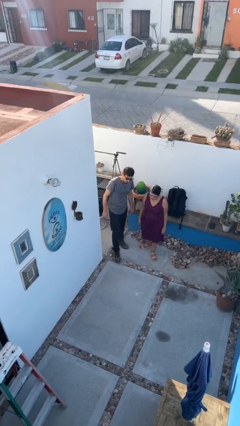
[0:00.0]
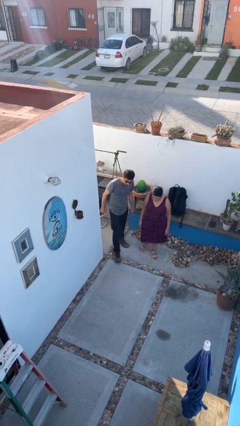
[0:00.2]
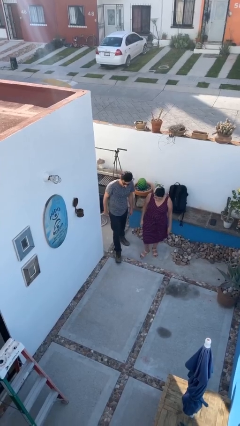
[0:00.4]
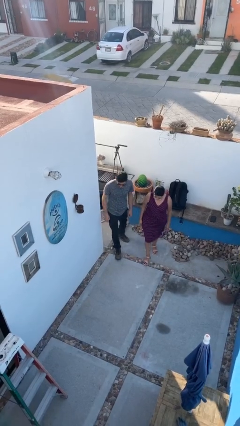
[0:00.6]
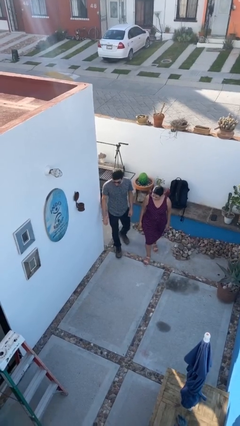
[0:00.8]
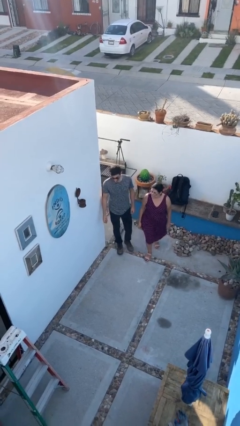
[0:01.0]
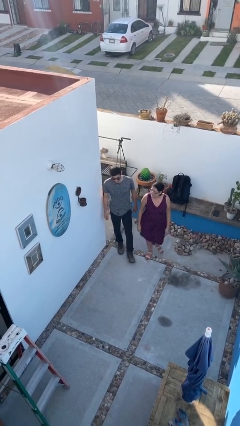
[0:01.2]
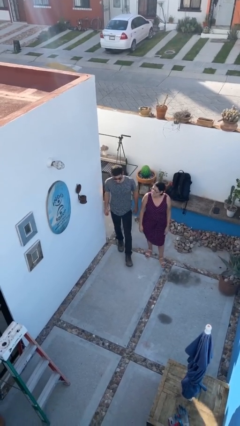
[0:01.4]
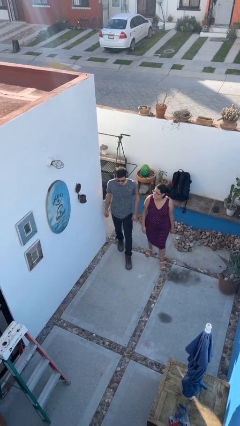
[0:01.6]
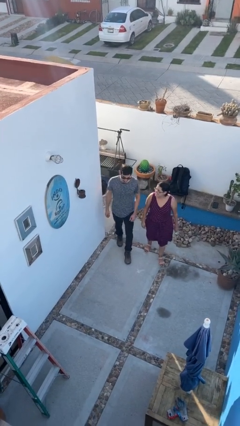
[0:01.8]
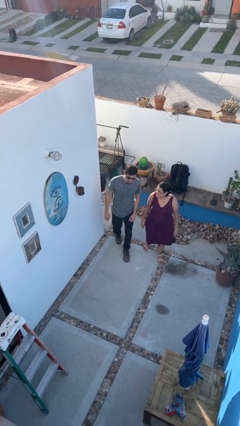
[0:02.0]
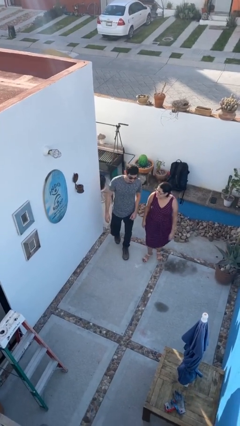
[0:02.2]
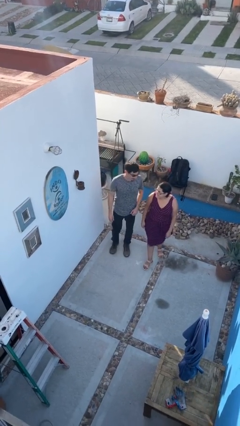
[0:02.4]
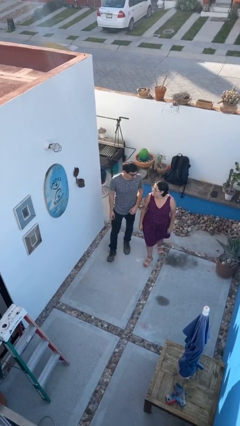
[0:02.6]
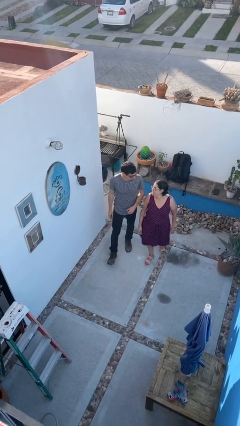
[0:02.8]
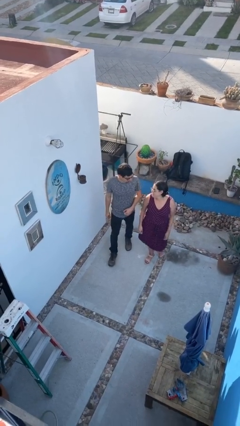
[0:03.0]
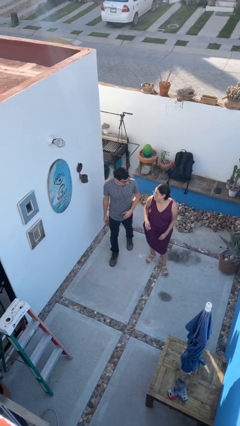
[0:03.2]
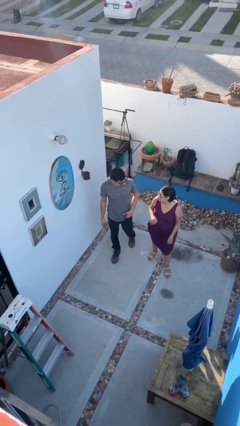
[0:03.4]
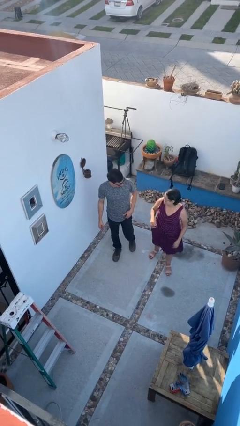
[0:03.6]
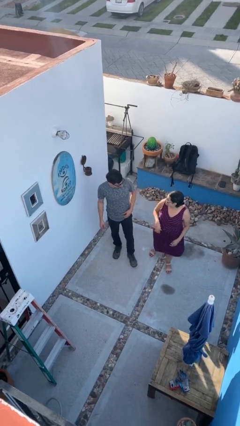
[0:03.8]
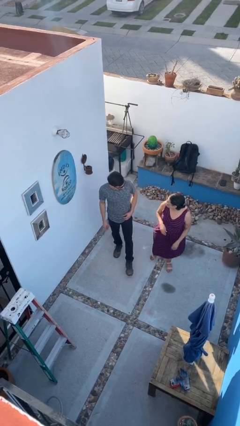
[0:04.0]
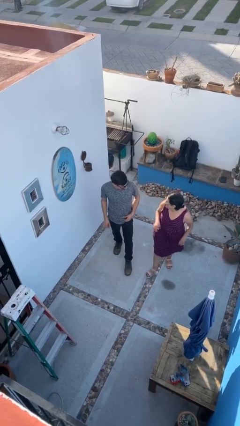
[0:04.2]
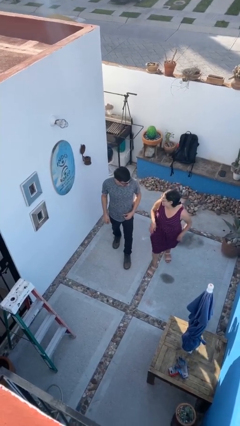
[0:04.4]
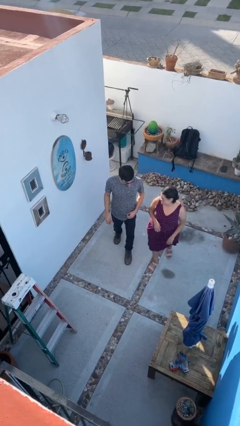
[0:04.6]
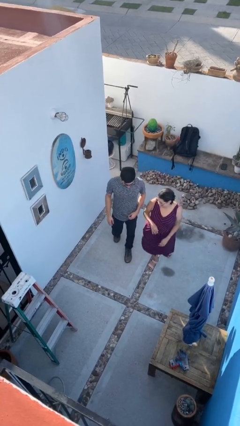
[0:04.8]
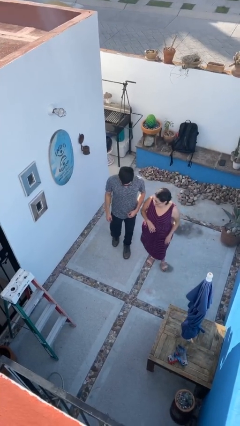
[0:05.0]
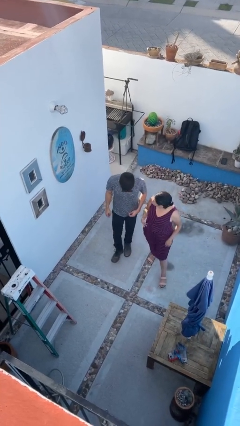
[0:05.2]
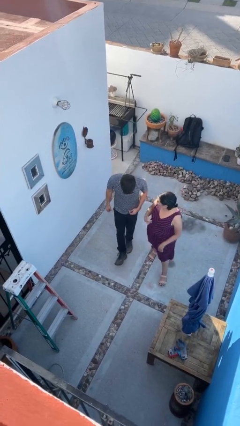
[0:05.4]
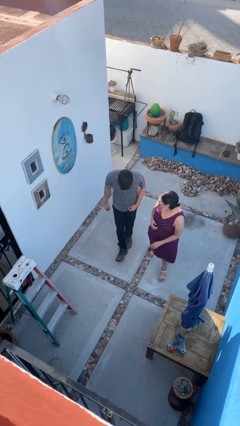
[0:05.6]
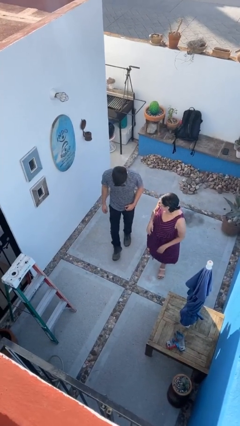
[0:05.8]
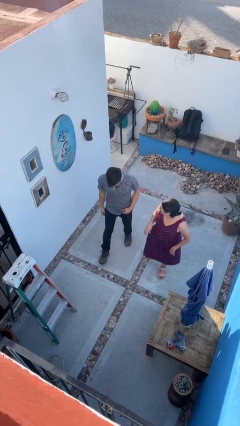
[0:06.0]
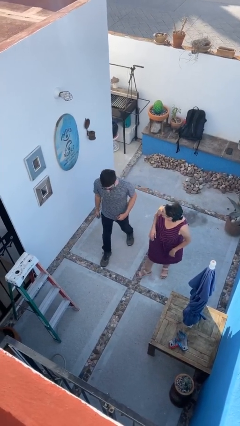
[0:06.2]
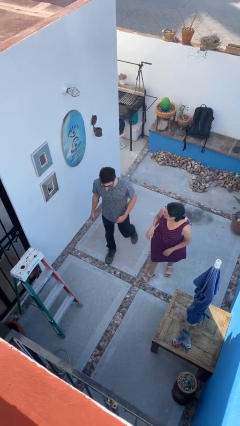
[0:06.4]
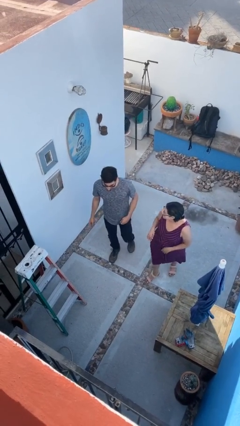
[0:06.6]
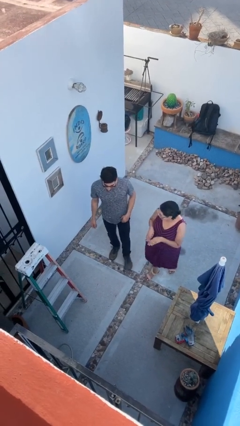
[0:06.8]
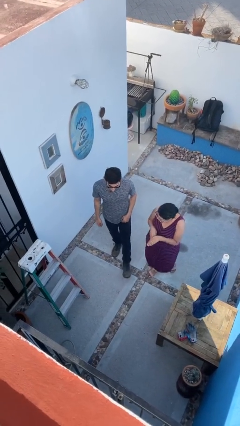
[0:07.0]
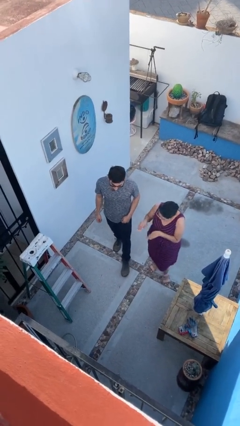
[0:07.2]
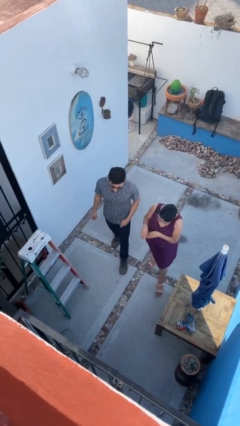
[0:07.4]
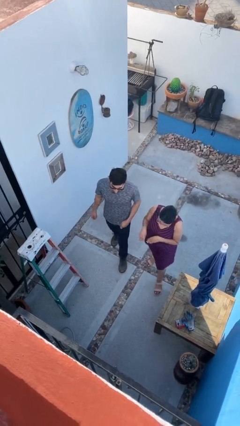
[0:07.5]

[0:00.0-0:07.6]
person talks to person

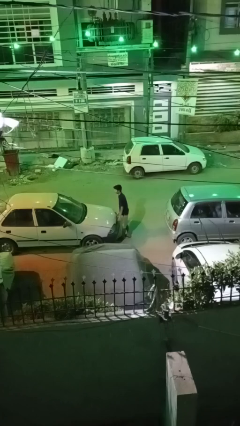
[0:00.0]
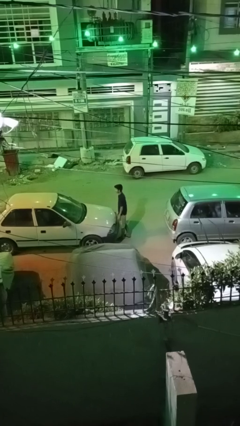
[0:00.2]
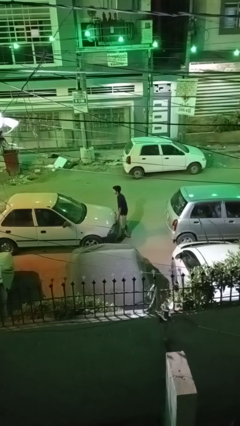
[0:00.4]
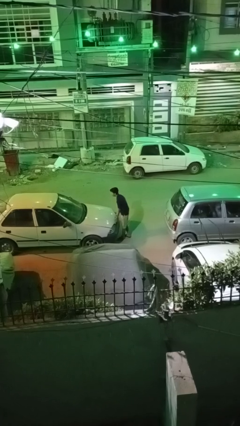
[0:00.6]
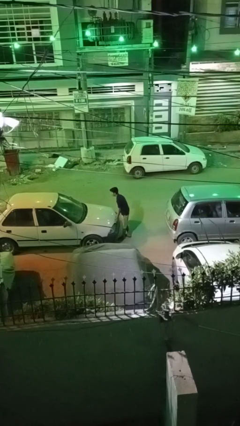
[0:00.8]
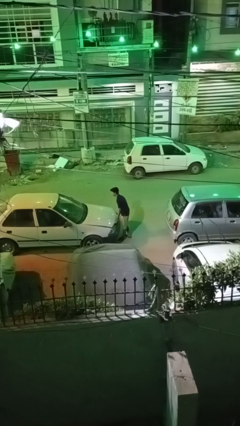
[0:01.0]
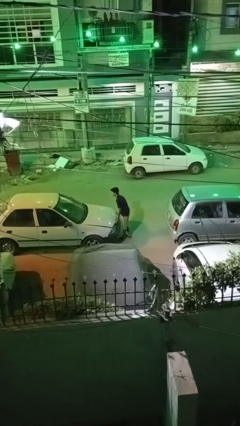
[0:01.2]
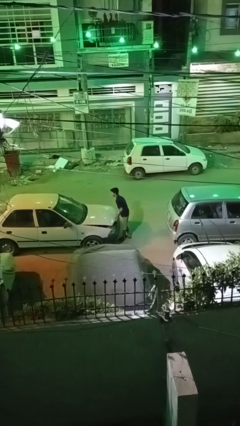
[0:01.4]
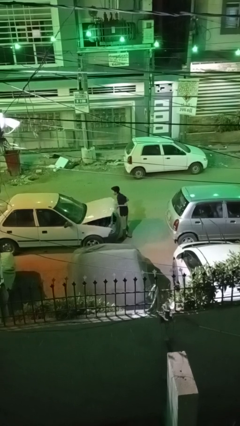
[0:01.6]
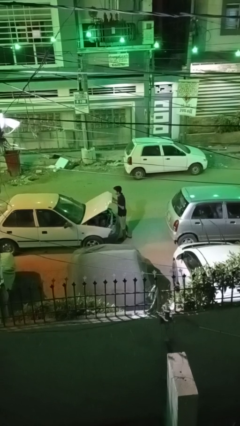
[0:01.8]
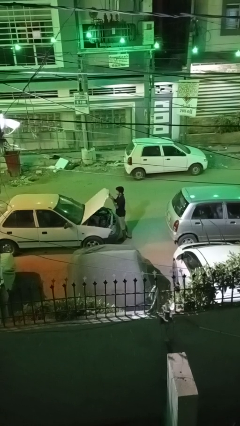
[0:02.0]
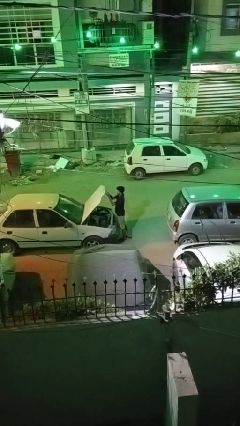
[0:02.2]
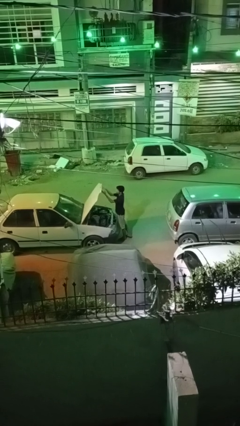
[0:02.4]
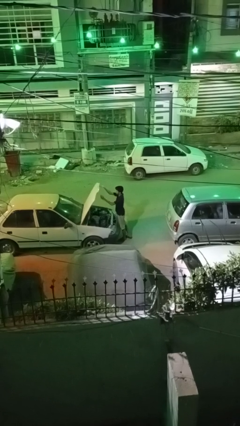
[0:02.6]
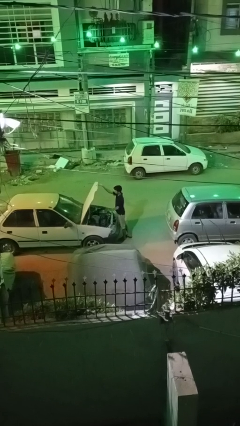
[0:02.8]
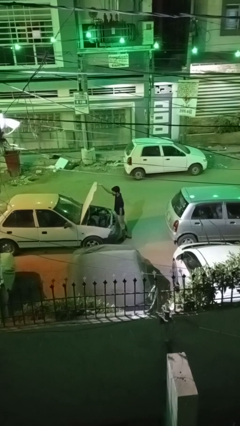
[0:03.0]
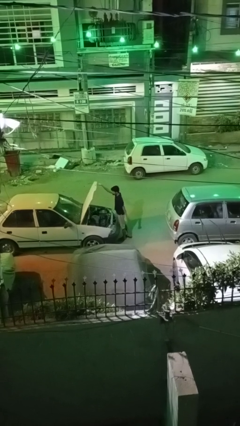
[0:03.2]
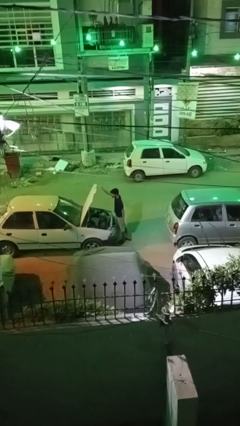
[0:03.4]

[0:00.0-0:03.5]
person opens car hood

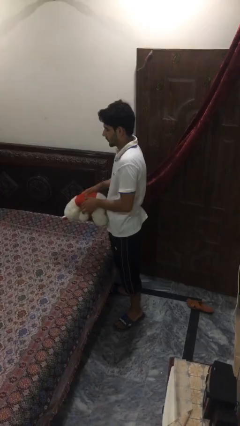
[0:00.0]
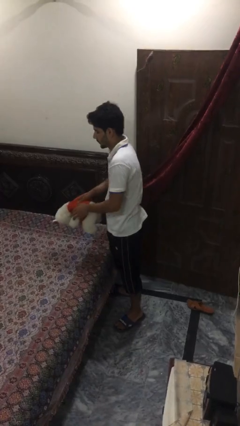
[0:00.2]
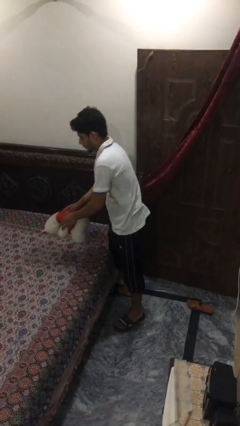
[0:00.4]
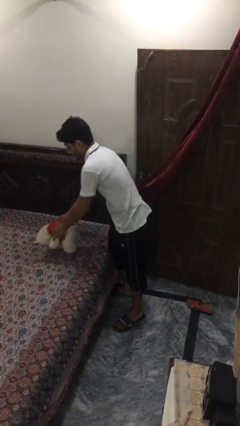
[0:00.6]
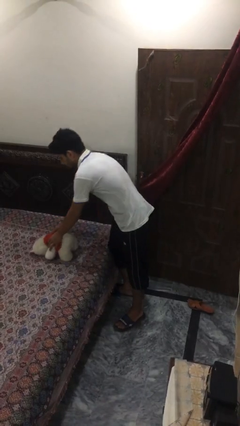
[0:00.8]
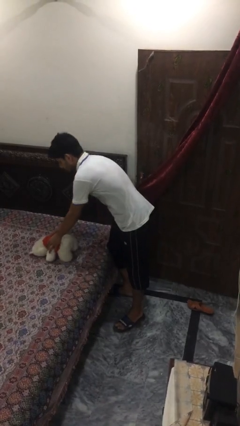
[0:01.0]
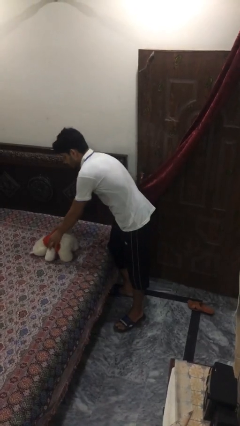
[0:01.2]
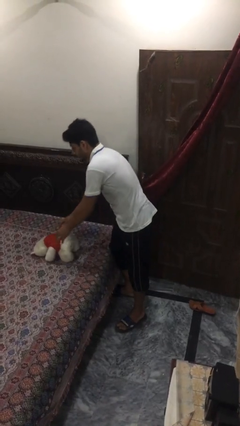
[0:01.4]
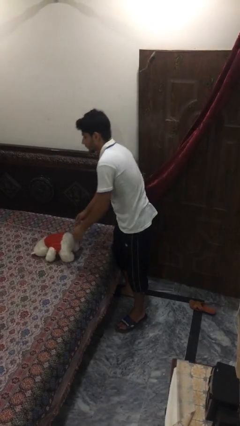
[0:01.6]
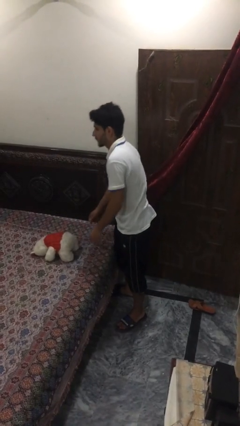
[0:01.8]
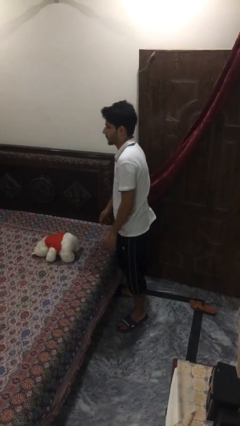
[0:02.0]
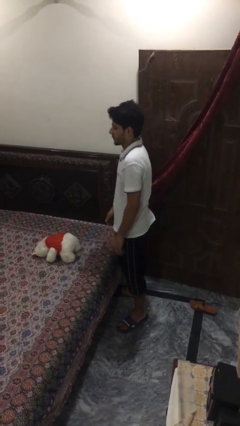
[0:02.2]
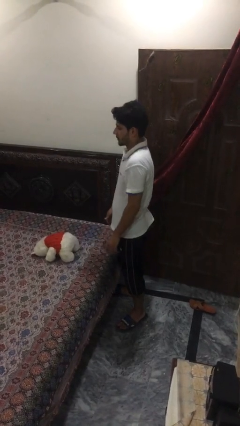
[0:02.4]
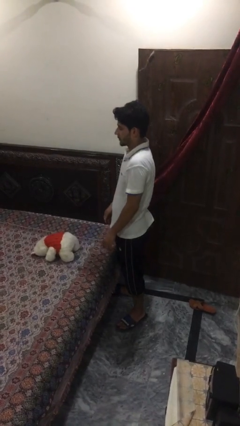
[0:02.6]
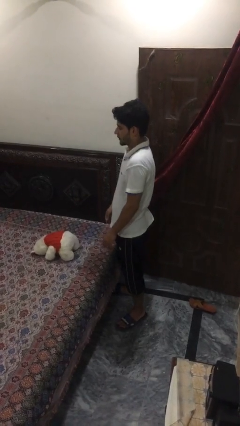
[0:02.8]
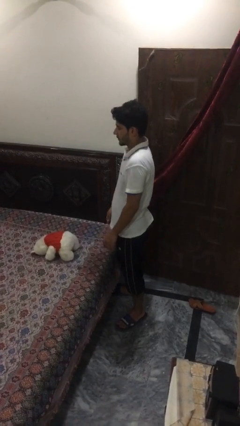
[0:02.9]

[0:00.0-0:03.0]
person puts down object on bed

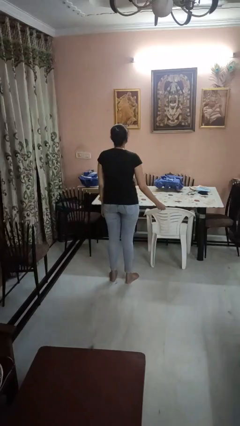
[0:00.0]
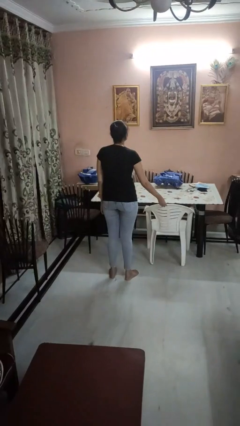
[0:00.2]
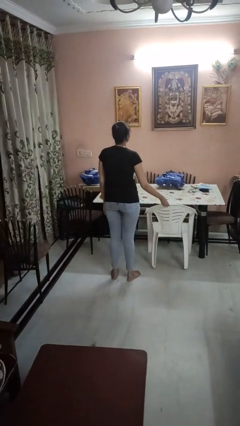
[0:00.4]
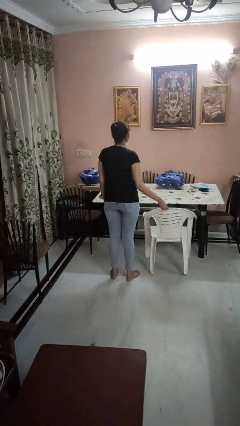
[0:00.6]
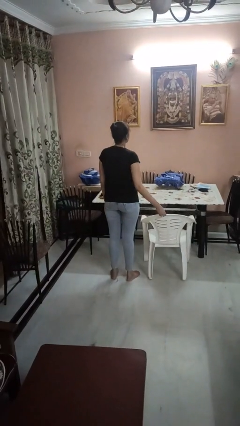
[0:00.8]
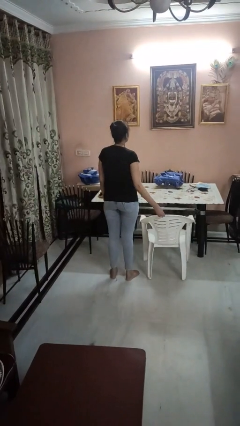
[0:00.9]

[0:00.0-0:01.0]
person pulls out chair

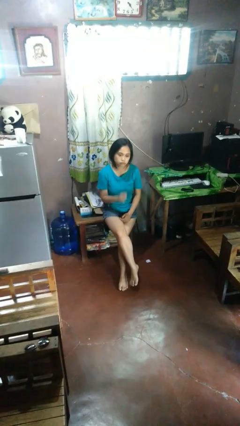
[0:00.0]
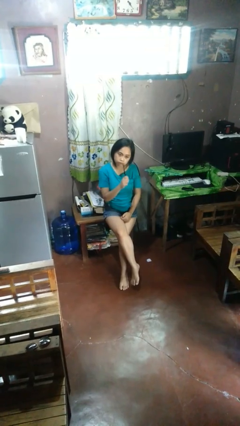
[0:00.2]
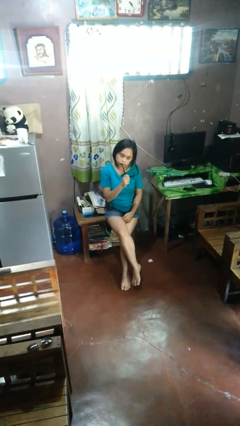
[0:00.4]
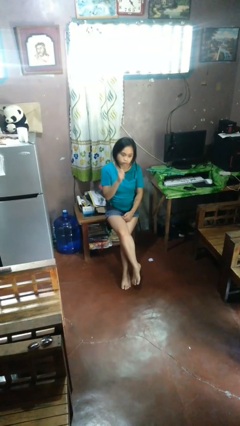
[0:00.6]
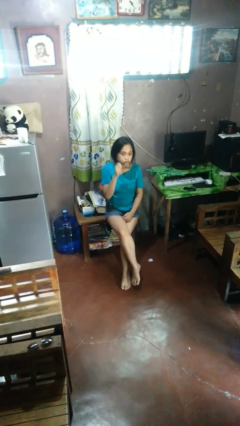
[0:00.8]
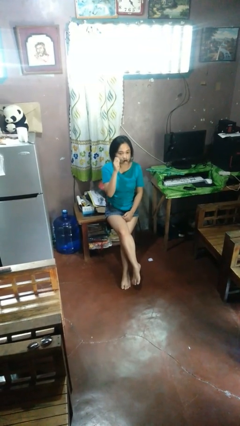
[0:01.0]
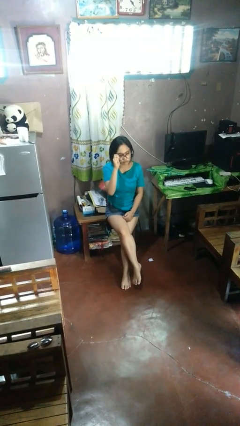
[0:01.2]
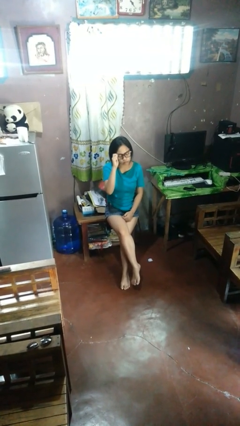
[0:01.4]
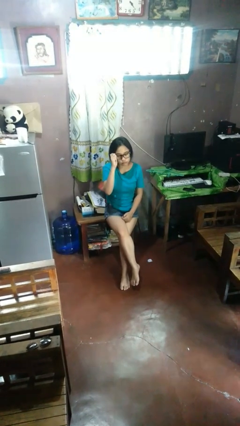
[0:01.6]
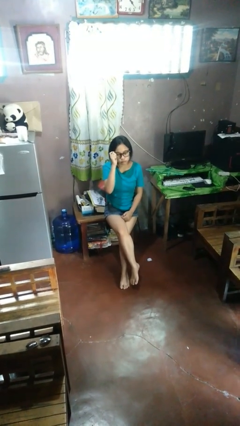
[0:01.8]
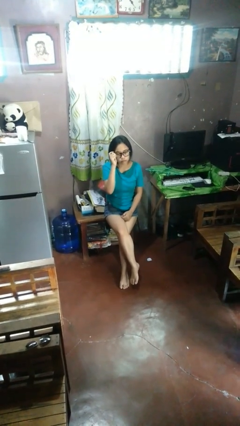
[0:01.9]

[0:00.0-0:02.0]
person puts on glasses

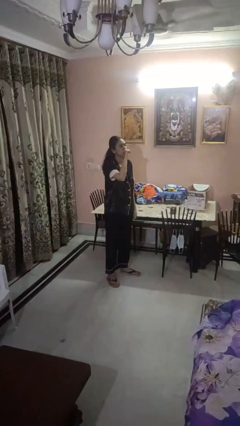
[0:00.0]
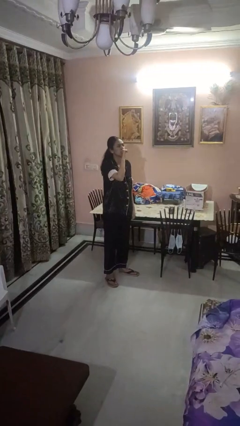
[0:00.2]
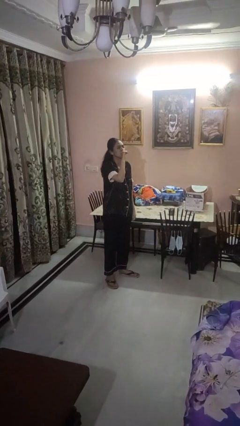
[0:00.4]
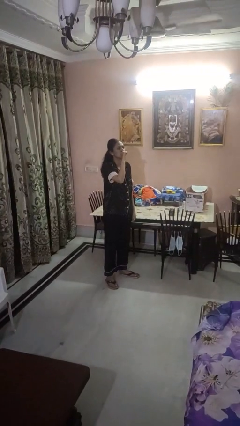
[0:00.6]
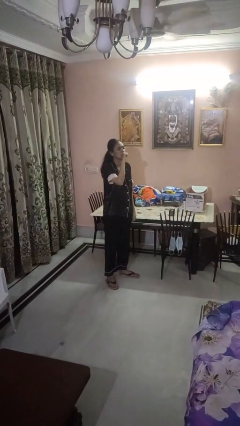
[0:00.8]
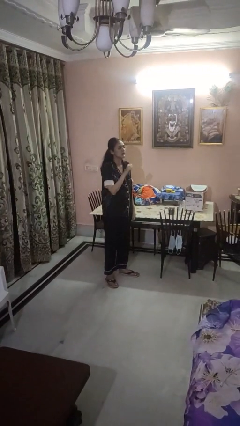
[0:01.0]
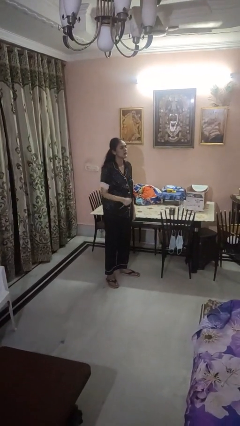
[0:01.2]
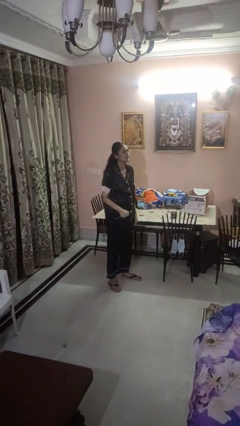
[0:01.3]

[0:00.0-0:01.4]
person vapes
